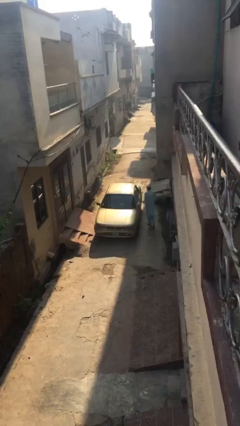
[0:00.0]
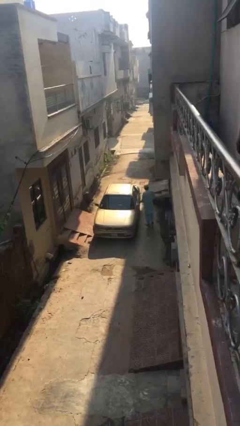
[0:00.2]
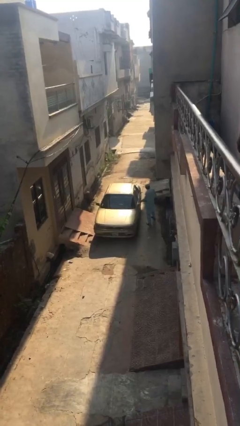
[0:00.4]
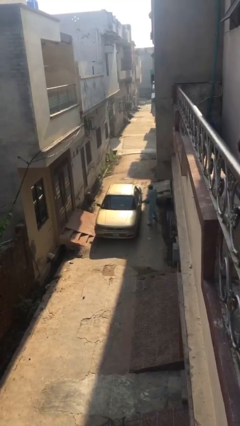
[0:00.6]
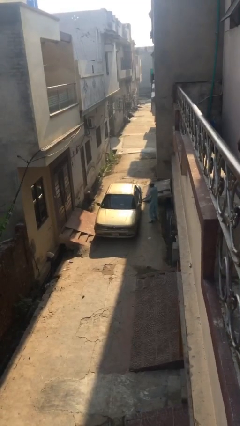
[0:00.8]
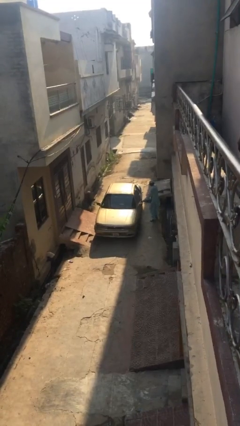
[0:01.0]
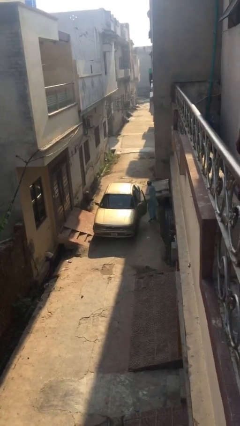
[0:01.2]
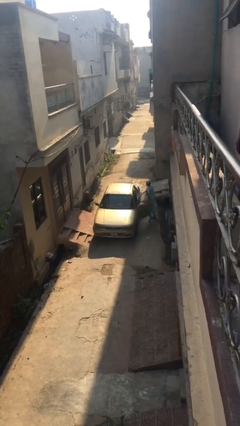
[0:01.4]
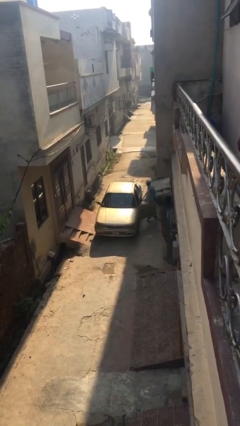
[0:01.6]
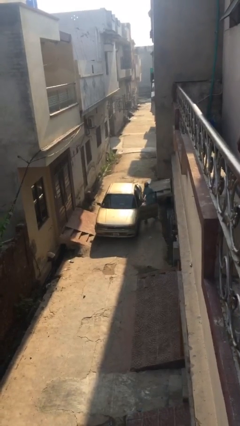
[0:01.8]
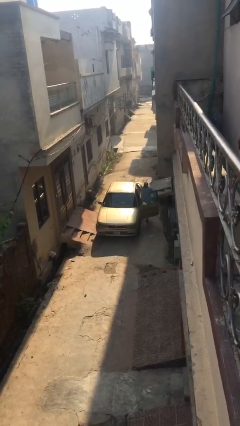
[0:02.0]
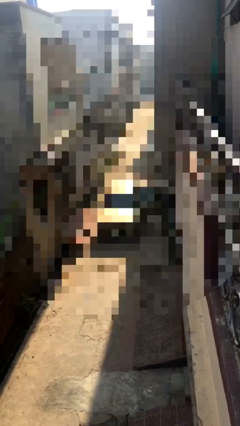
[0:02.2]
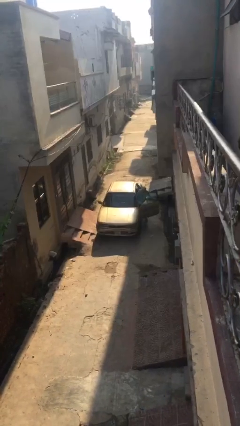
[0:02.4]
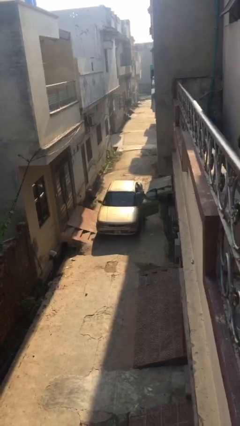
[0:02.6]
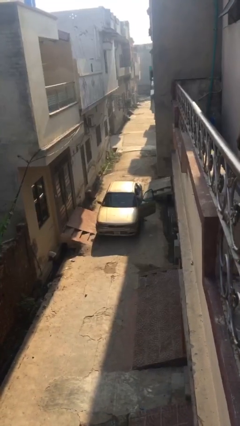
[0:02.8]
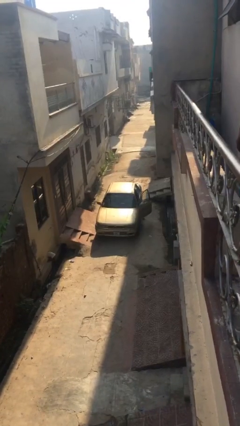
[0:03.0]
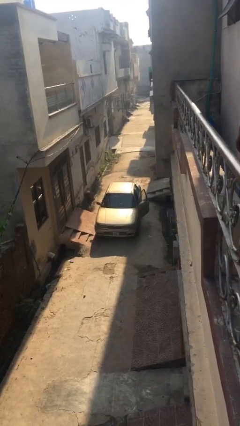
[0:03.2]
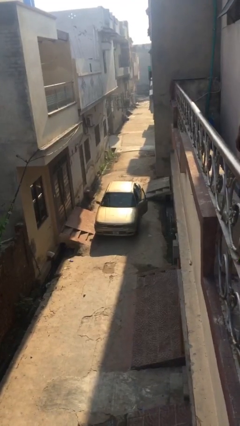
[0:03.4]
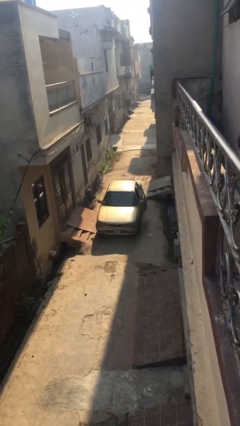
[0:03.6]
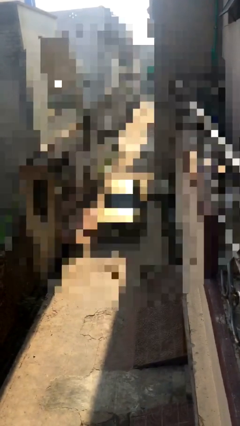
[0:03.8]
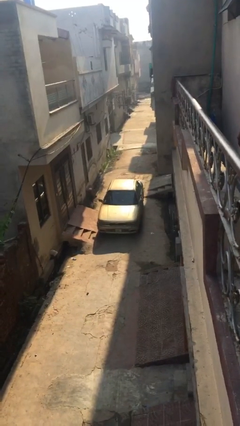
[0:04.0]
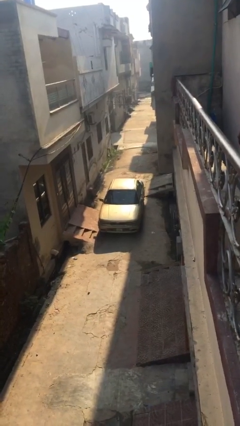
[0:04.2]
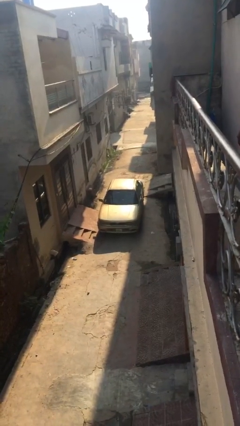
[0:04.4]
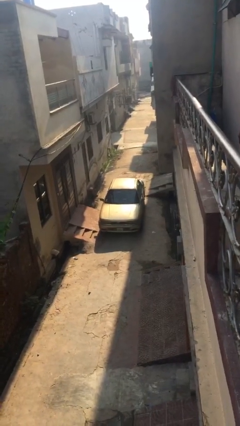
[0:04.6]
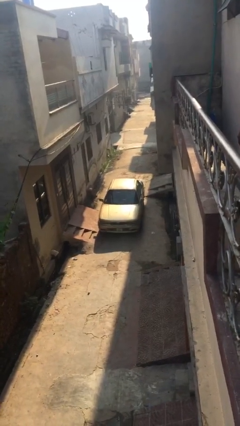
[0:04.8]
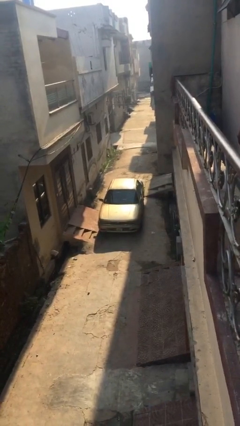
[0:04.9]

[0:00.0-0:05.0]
car picks up person

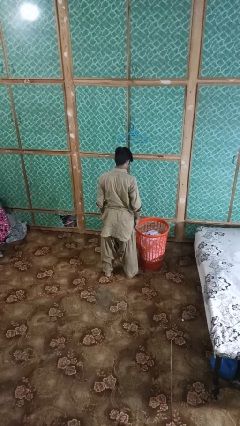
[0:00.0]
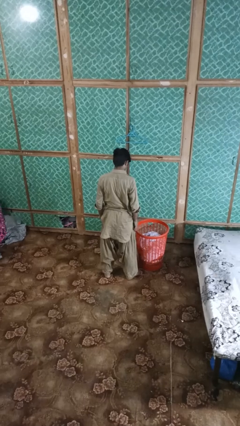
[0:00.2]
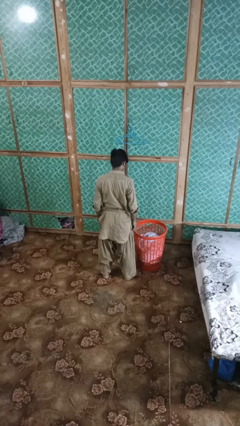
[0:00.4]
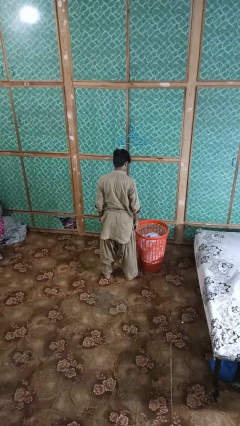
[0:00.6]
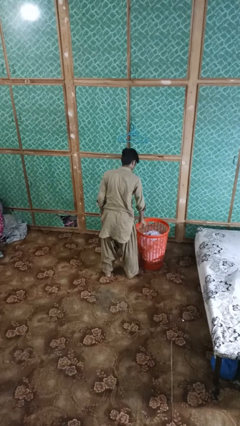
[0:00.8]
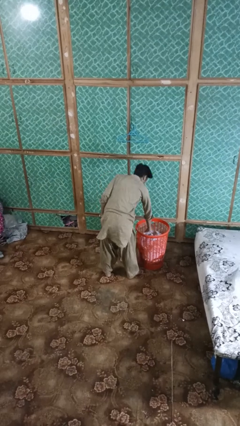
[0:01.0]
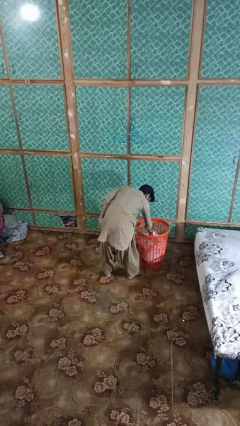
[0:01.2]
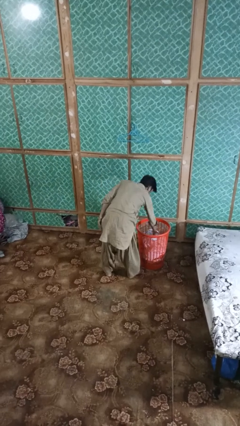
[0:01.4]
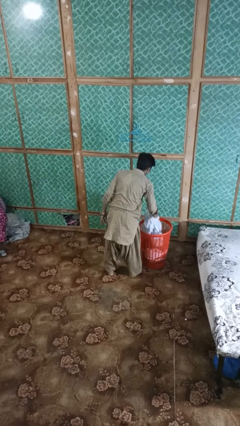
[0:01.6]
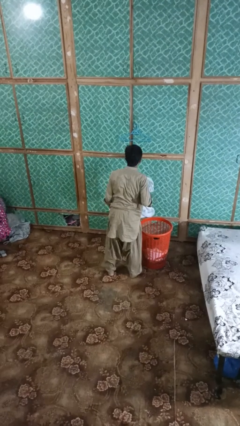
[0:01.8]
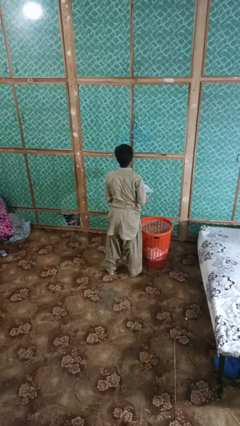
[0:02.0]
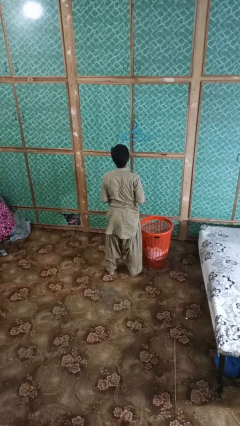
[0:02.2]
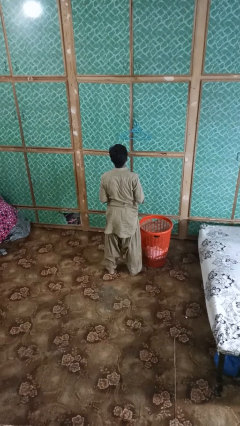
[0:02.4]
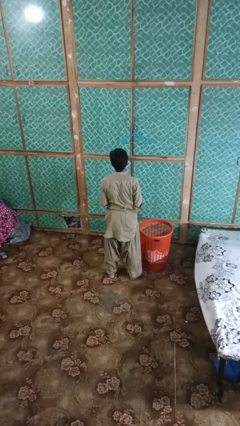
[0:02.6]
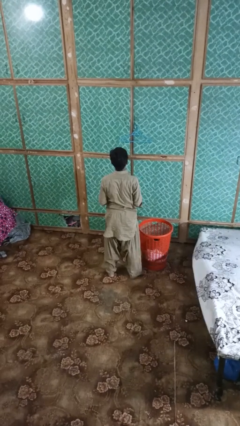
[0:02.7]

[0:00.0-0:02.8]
person takes object from basket

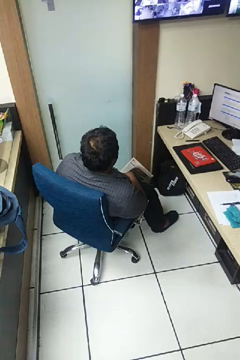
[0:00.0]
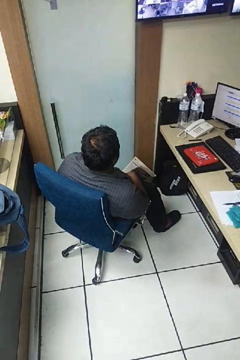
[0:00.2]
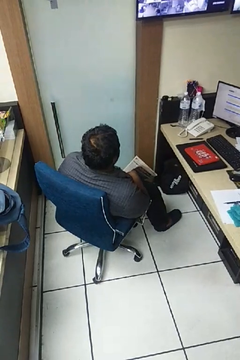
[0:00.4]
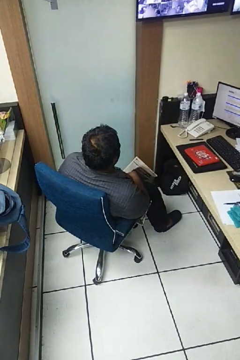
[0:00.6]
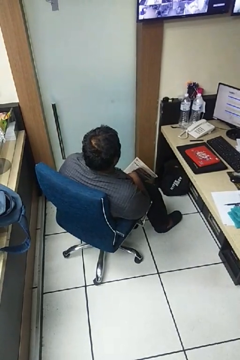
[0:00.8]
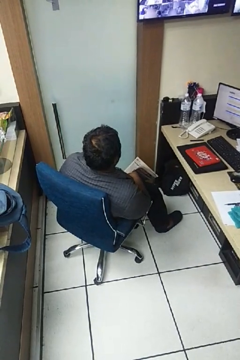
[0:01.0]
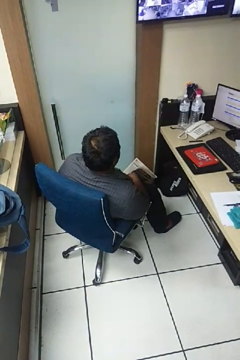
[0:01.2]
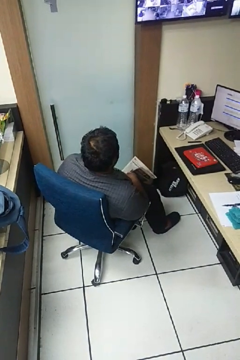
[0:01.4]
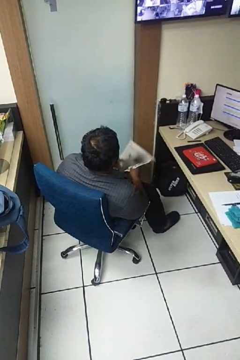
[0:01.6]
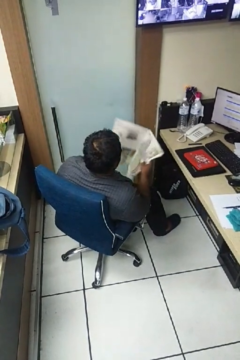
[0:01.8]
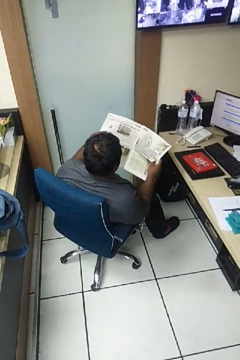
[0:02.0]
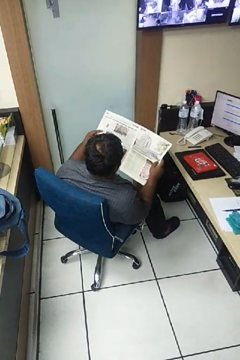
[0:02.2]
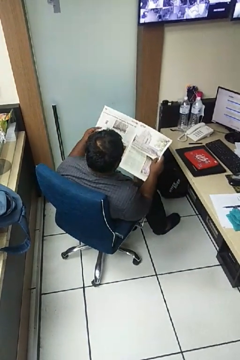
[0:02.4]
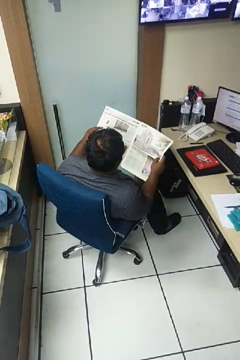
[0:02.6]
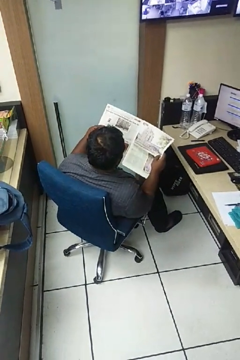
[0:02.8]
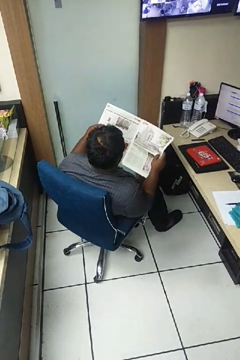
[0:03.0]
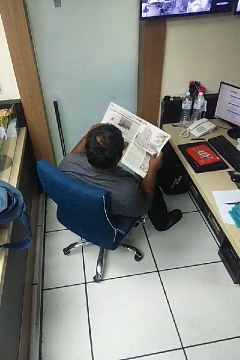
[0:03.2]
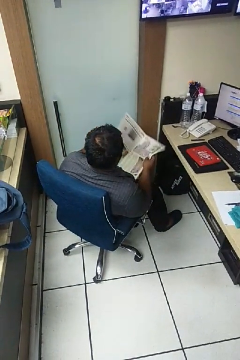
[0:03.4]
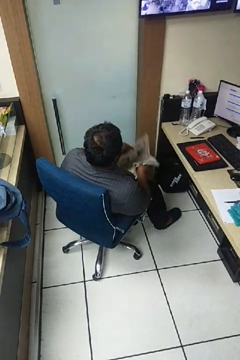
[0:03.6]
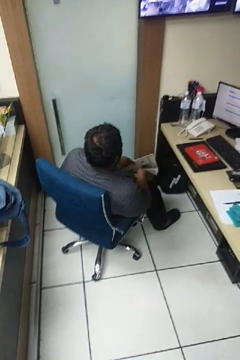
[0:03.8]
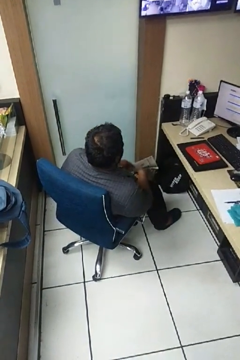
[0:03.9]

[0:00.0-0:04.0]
person reads newspaper

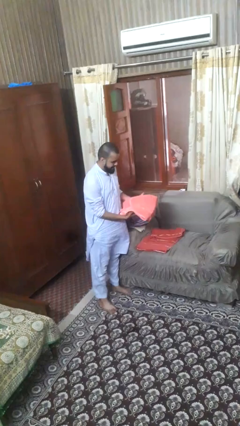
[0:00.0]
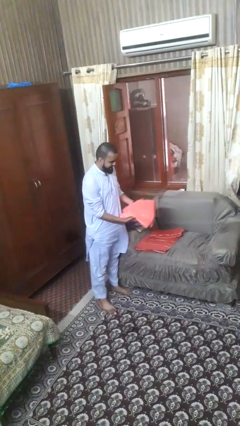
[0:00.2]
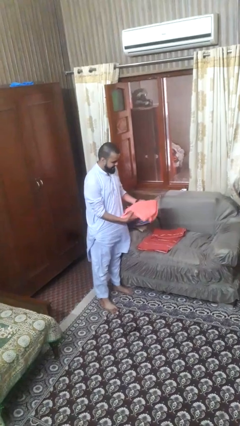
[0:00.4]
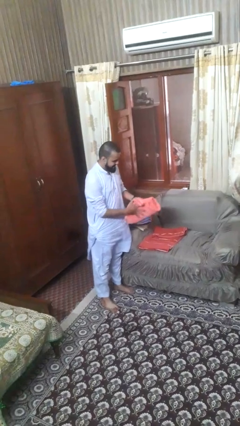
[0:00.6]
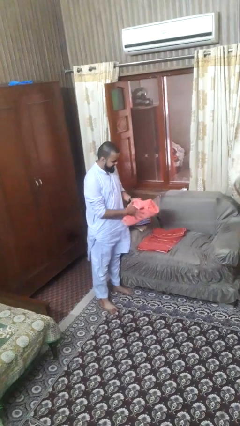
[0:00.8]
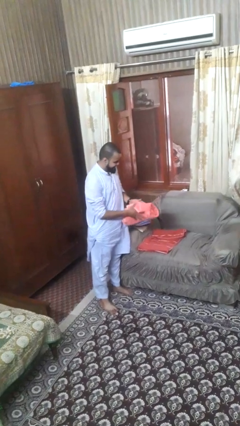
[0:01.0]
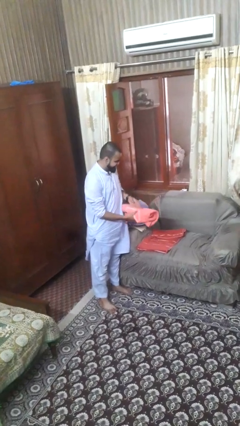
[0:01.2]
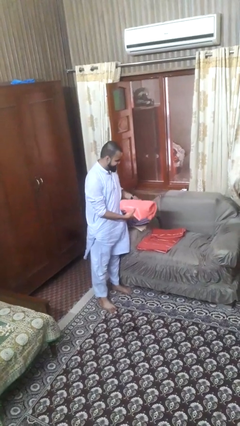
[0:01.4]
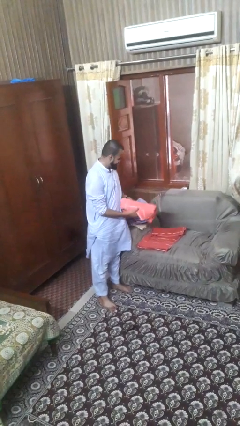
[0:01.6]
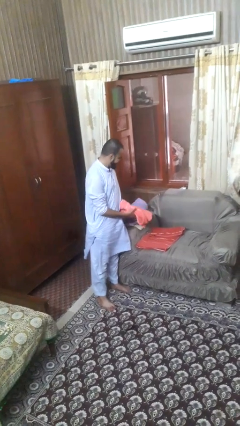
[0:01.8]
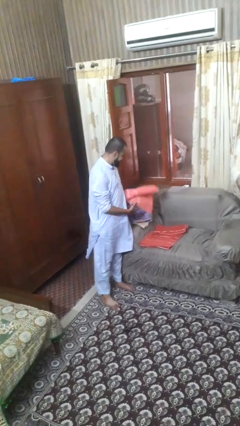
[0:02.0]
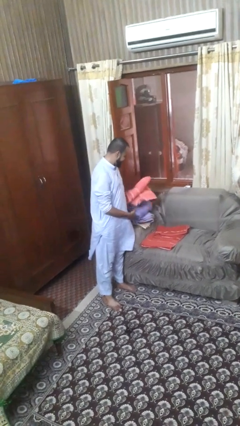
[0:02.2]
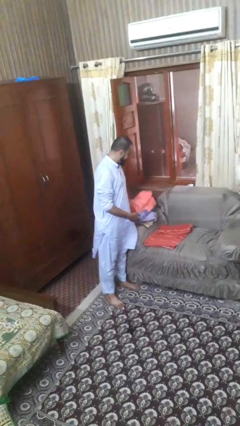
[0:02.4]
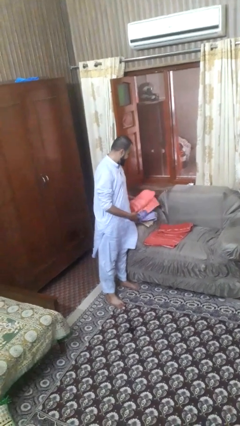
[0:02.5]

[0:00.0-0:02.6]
person folds towel

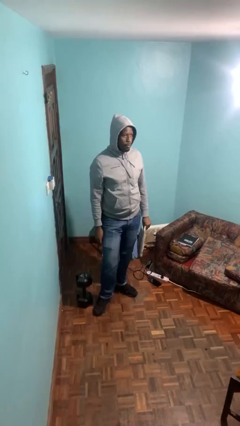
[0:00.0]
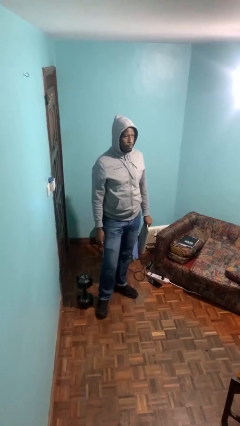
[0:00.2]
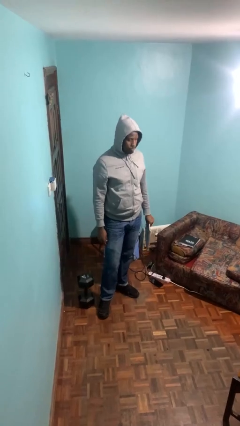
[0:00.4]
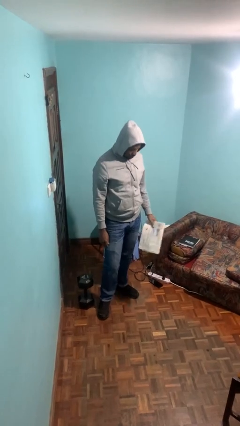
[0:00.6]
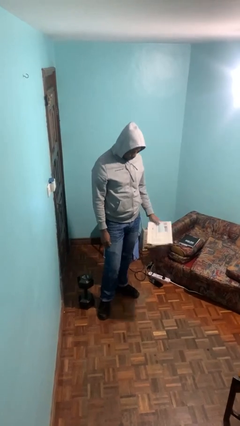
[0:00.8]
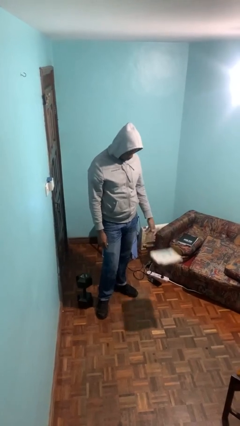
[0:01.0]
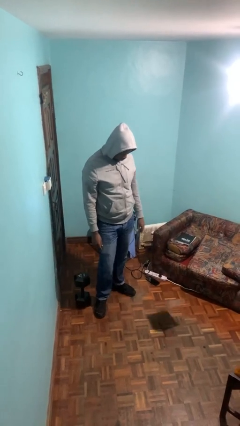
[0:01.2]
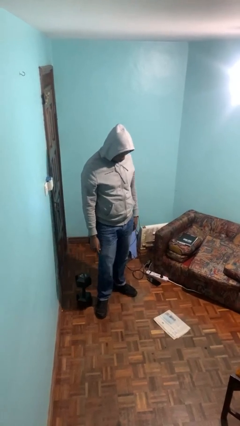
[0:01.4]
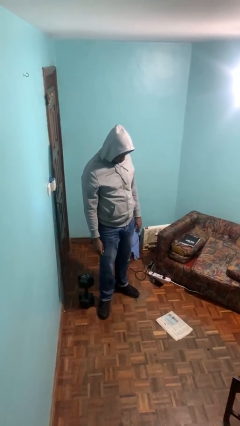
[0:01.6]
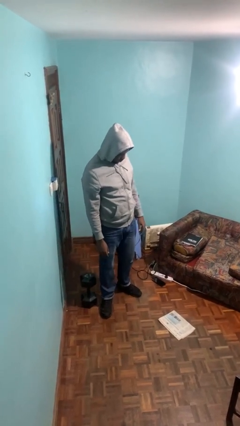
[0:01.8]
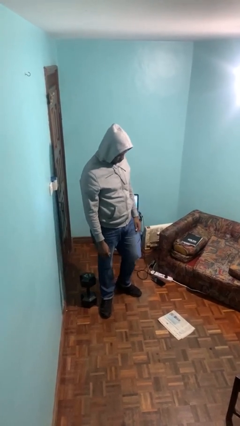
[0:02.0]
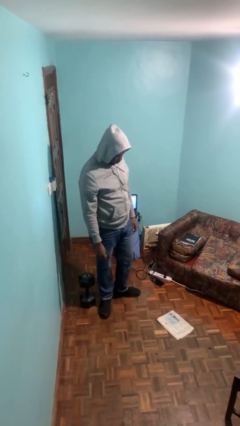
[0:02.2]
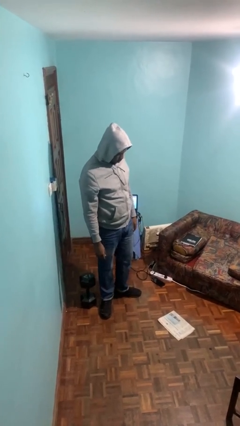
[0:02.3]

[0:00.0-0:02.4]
person drops object

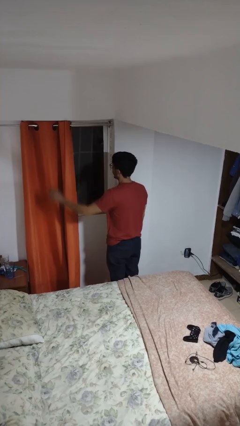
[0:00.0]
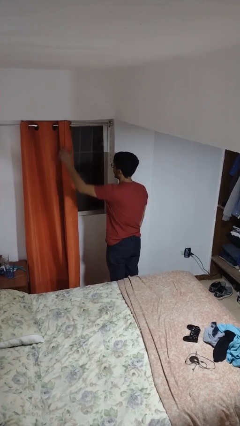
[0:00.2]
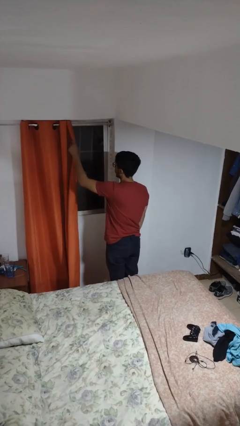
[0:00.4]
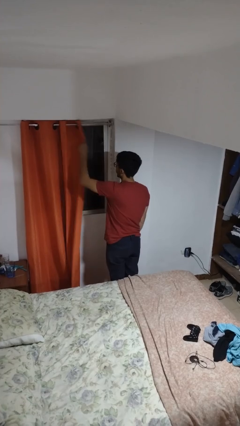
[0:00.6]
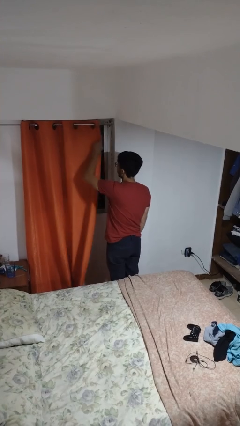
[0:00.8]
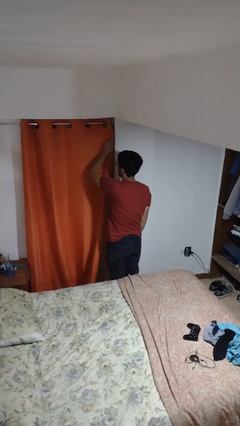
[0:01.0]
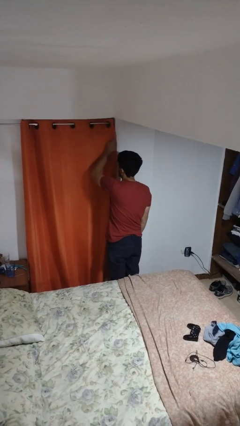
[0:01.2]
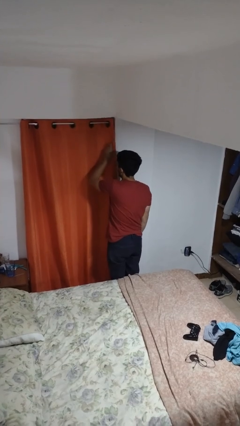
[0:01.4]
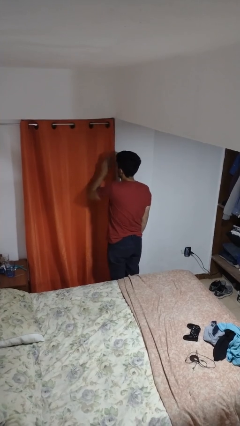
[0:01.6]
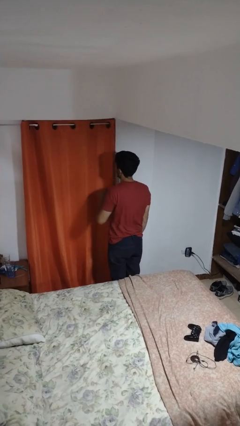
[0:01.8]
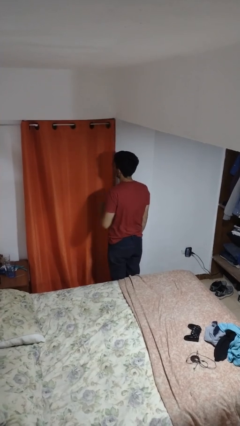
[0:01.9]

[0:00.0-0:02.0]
person closes curtains
